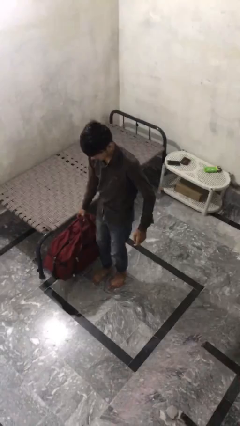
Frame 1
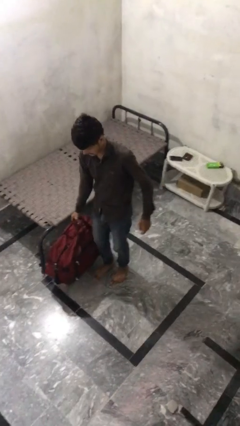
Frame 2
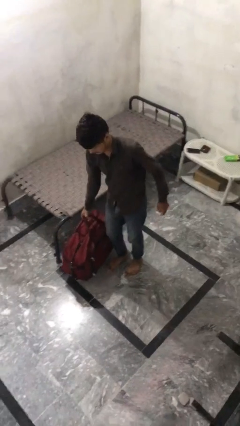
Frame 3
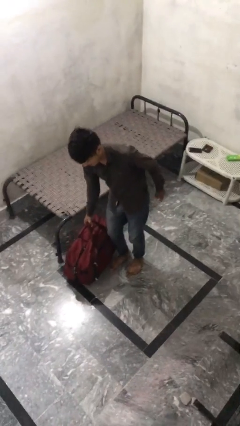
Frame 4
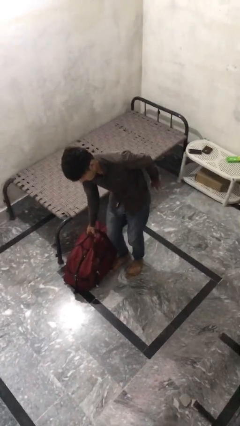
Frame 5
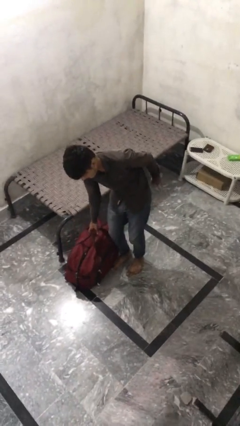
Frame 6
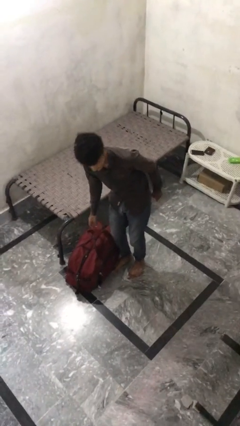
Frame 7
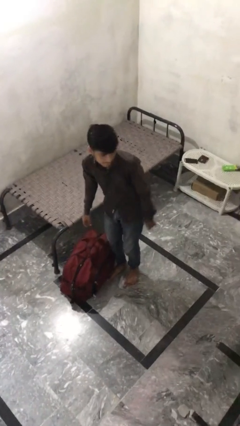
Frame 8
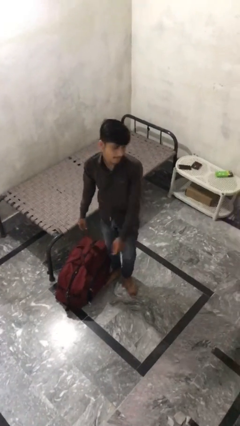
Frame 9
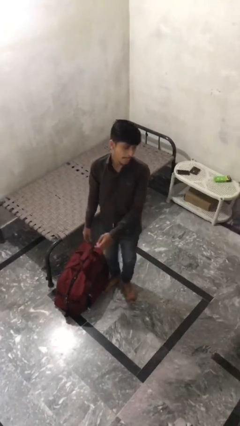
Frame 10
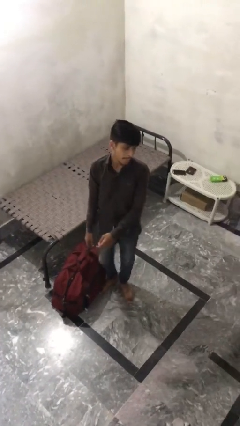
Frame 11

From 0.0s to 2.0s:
person puts down object on floor

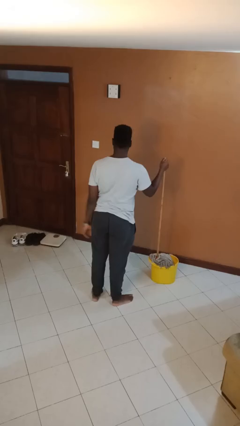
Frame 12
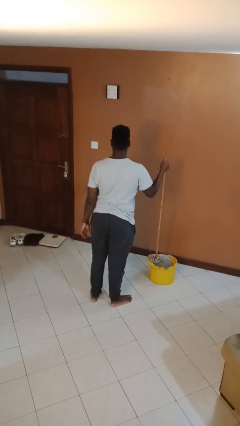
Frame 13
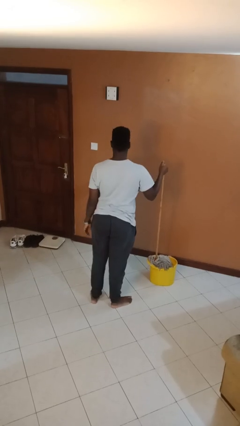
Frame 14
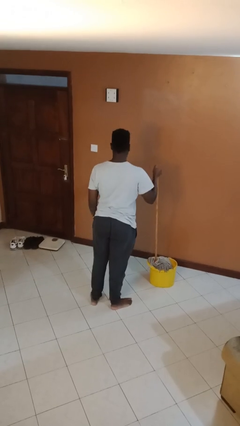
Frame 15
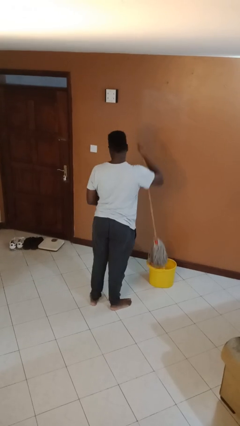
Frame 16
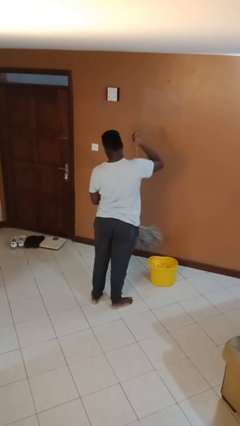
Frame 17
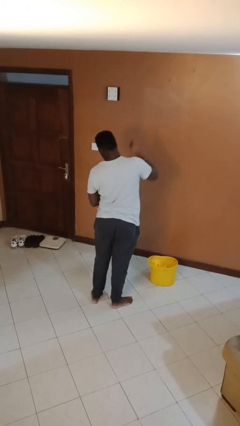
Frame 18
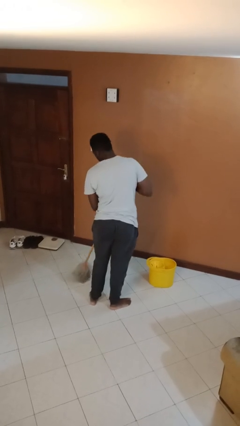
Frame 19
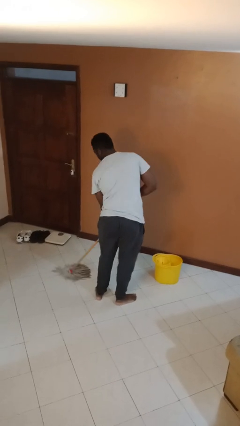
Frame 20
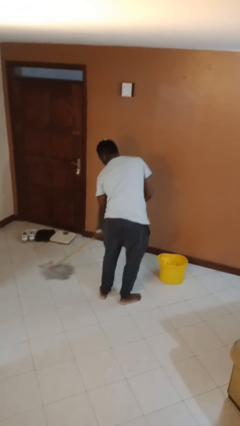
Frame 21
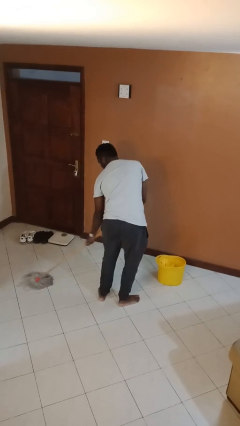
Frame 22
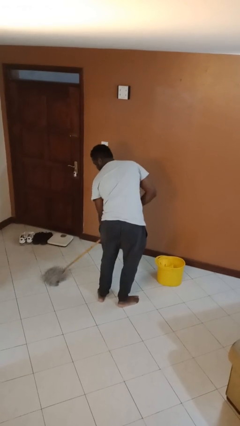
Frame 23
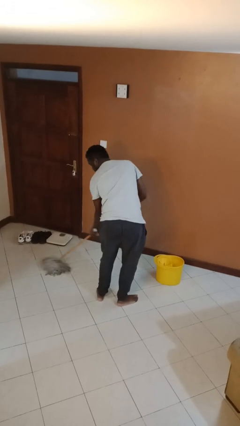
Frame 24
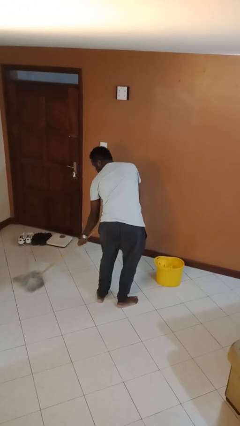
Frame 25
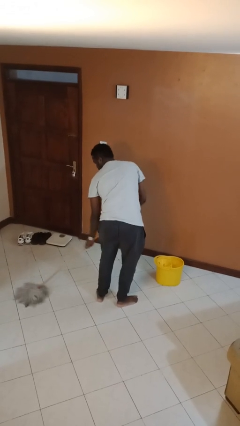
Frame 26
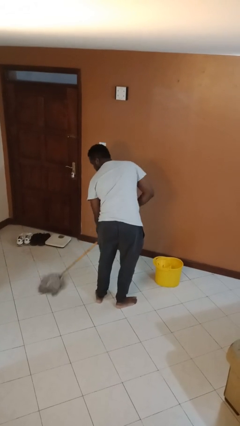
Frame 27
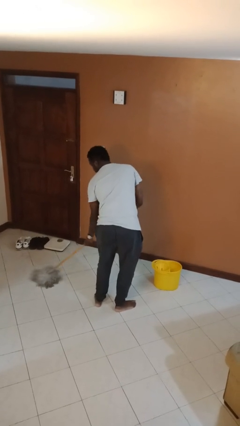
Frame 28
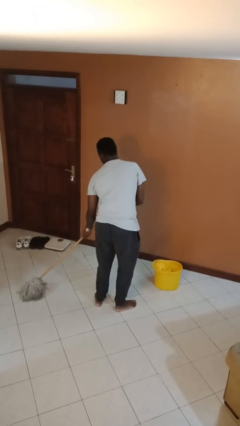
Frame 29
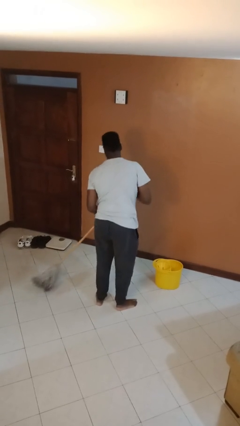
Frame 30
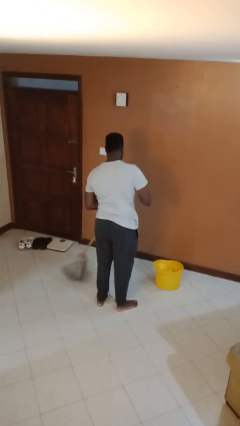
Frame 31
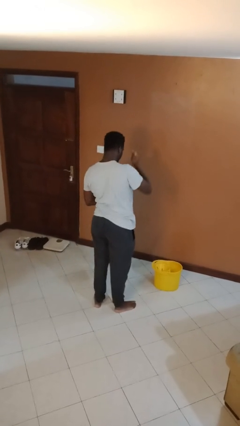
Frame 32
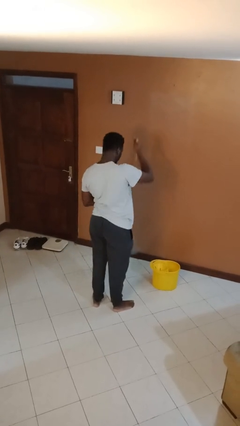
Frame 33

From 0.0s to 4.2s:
person mops

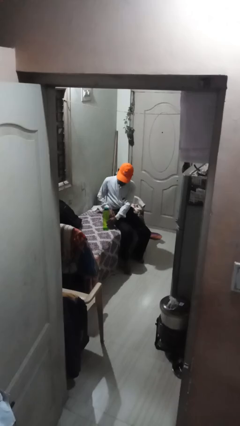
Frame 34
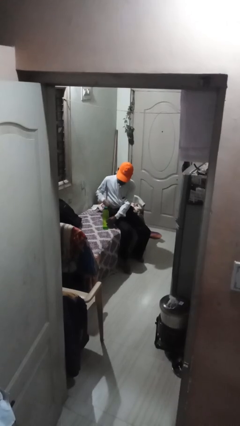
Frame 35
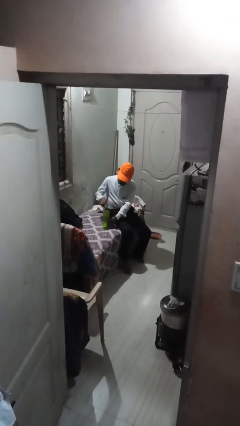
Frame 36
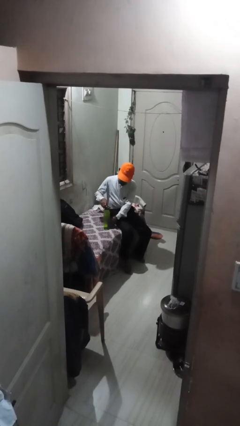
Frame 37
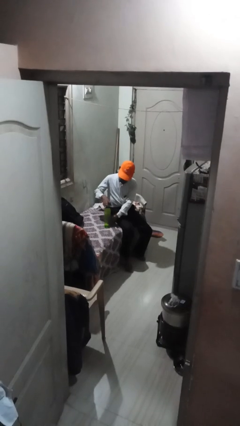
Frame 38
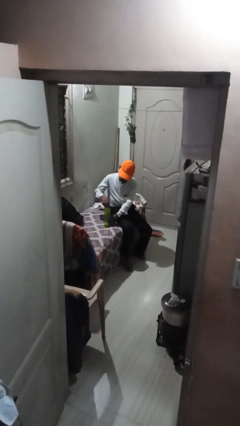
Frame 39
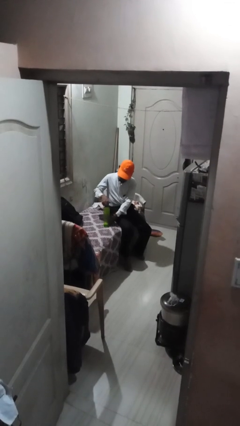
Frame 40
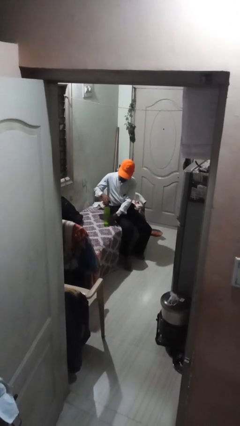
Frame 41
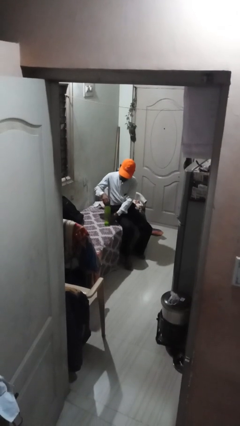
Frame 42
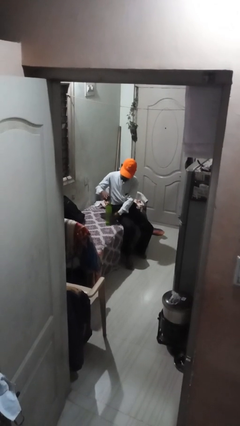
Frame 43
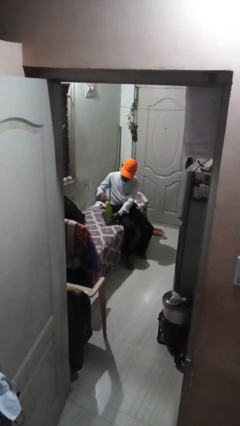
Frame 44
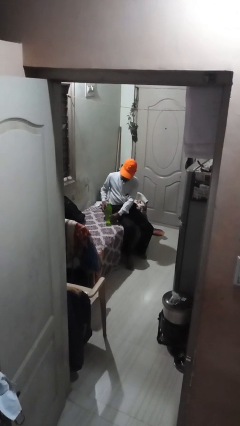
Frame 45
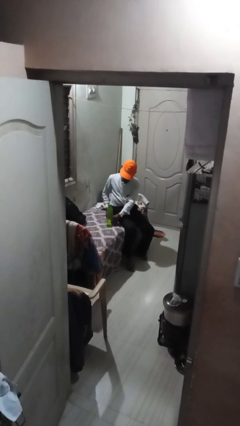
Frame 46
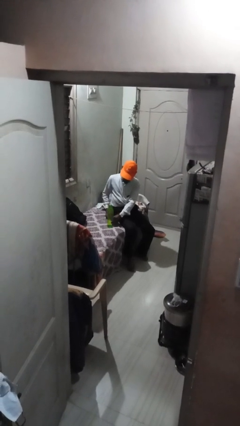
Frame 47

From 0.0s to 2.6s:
person unscrews lid from bottle

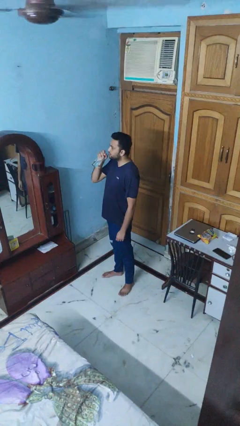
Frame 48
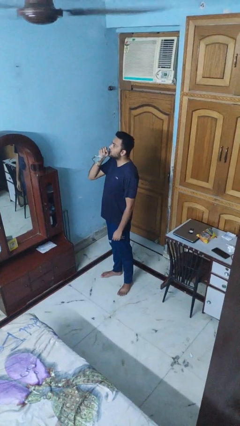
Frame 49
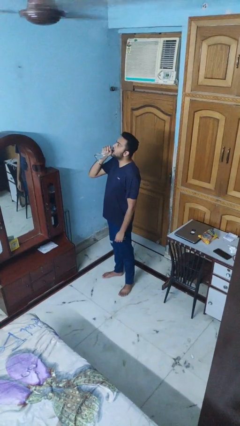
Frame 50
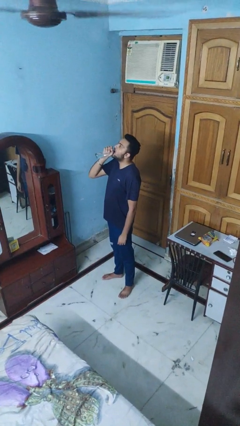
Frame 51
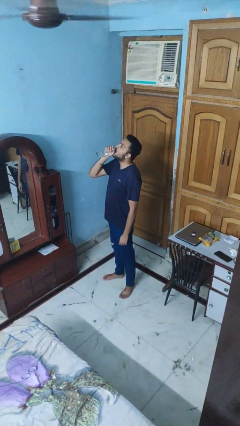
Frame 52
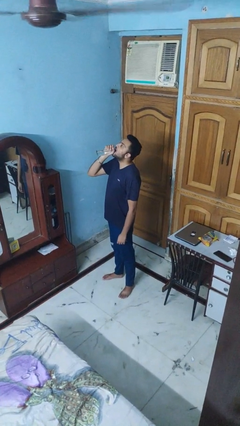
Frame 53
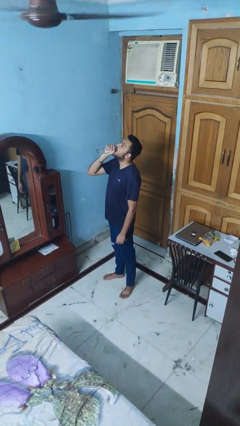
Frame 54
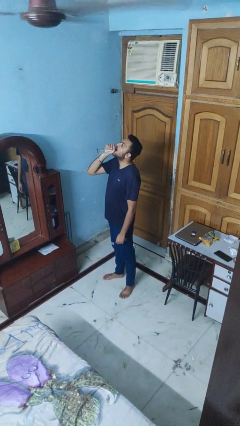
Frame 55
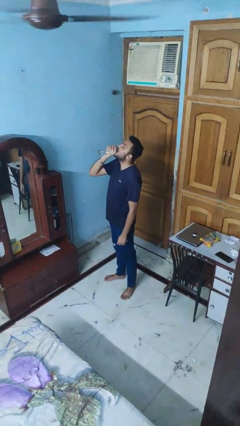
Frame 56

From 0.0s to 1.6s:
person drinks from bottle

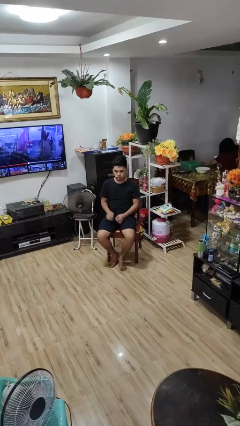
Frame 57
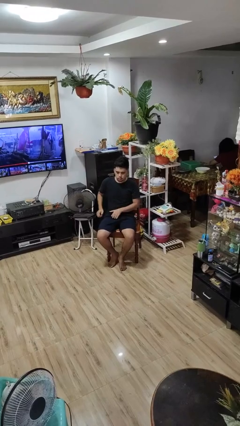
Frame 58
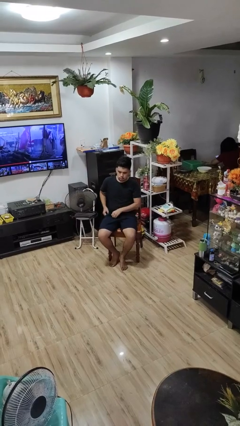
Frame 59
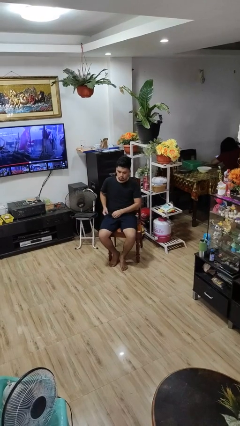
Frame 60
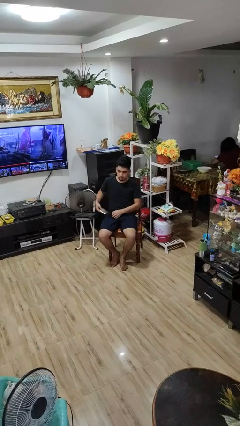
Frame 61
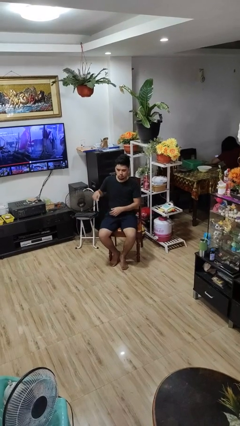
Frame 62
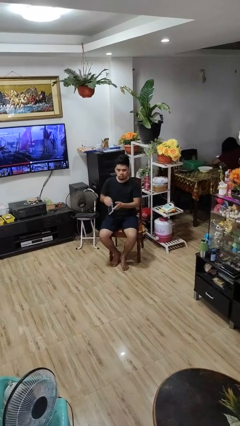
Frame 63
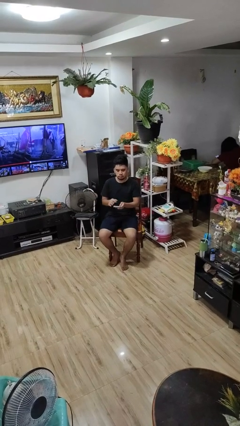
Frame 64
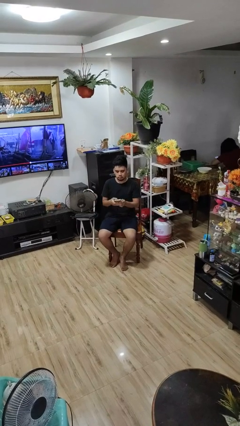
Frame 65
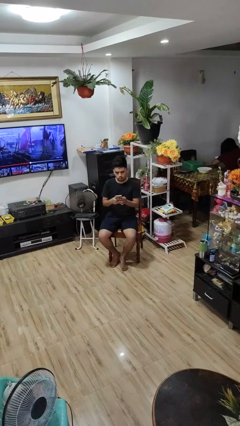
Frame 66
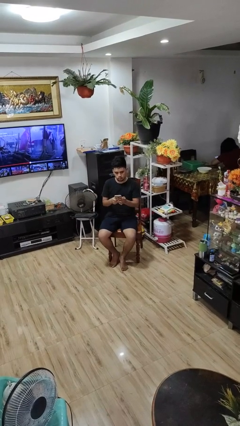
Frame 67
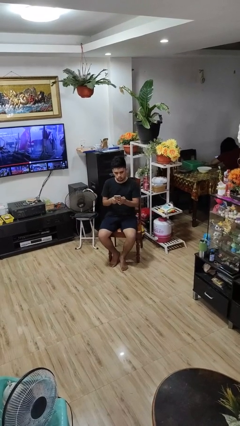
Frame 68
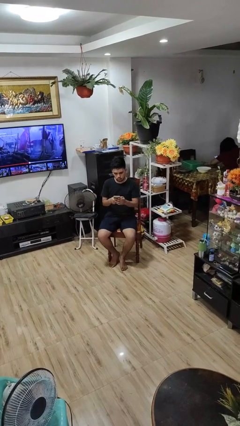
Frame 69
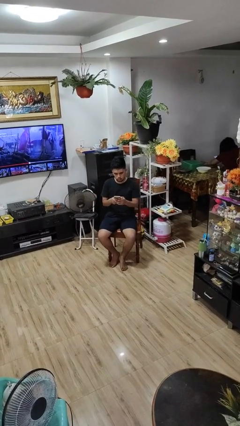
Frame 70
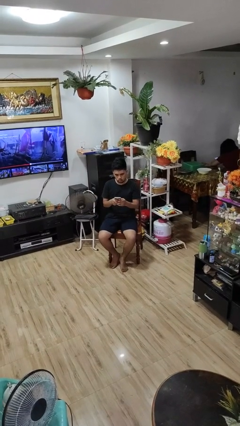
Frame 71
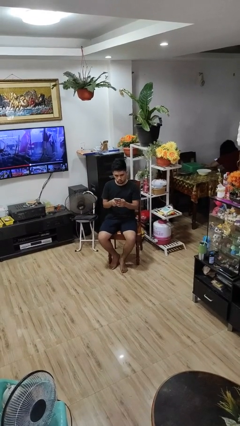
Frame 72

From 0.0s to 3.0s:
person takes phone from pocket

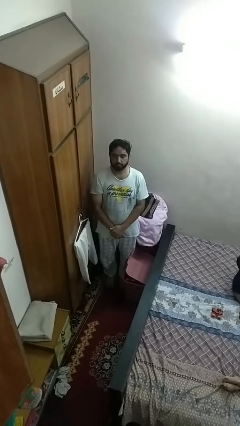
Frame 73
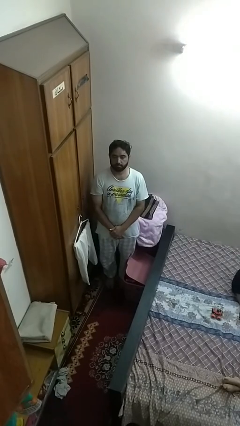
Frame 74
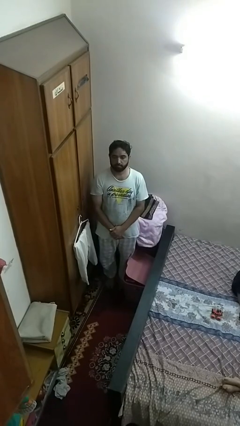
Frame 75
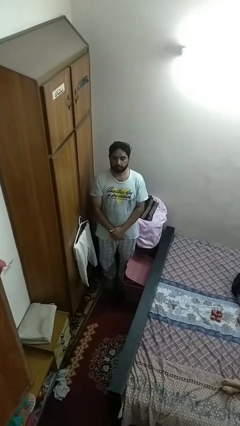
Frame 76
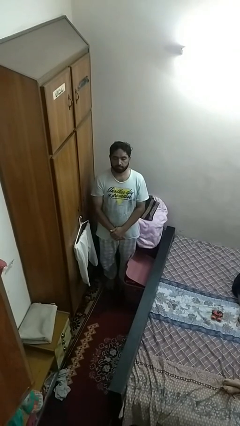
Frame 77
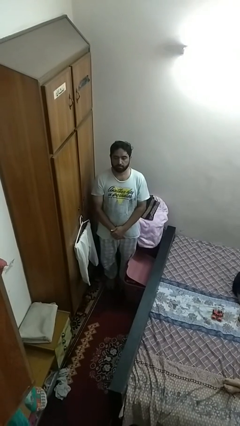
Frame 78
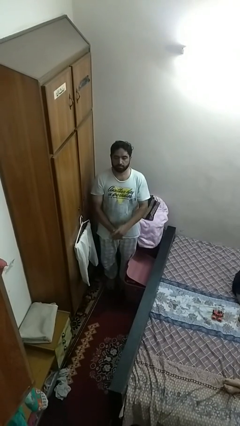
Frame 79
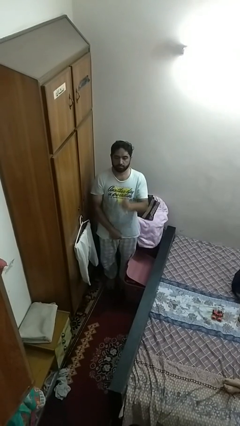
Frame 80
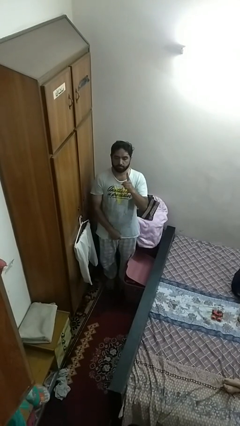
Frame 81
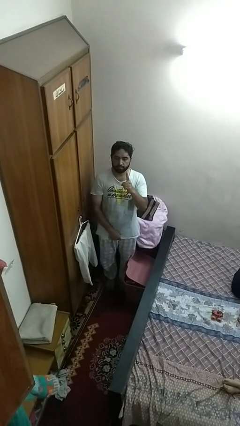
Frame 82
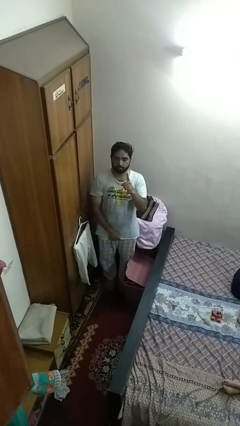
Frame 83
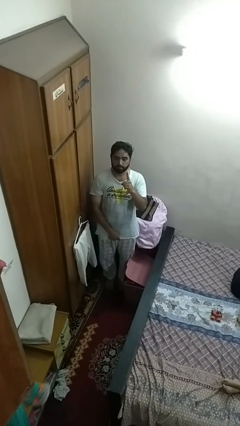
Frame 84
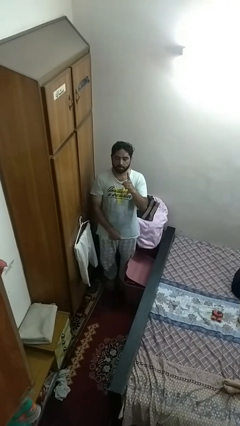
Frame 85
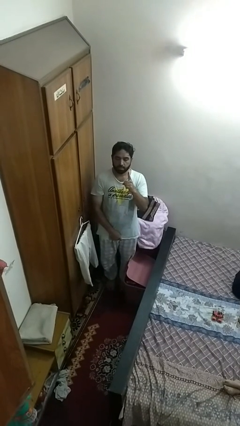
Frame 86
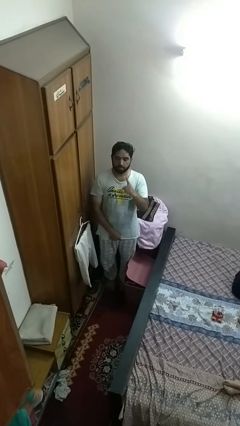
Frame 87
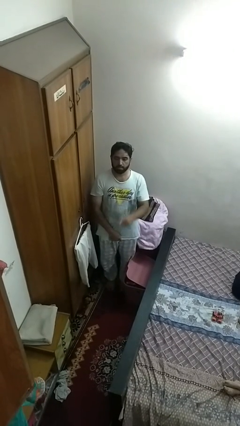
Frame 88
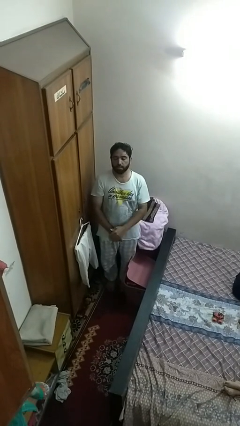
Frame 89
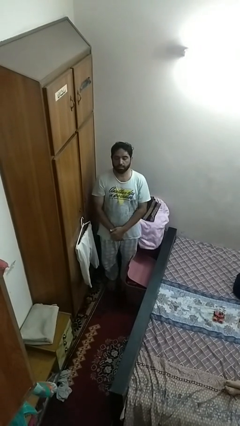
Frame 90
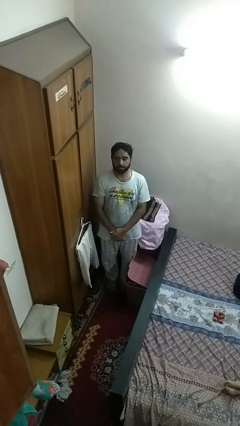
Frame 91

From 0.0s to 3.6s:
person gestures number one

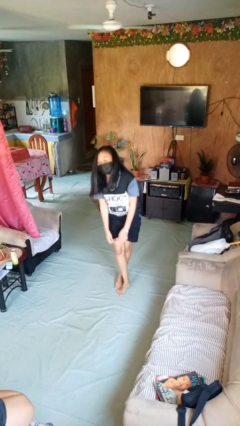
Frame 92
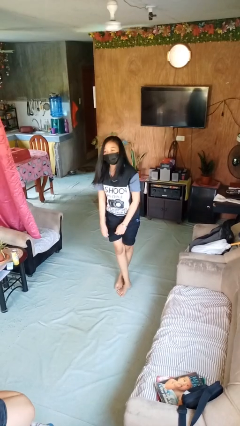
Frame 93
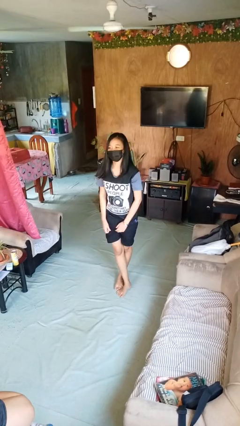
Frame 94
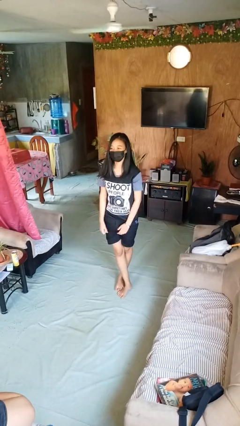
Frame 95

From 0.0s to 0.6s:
person stands up from floor
